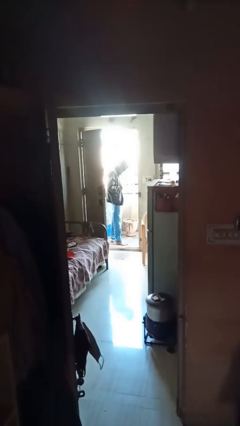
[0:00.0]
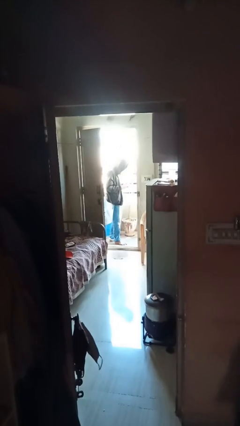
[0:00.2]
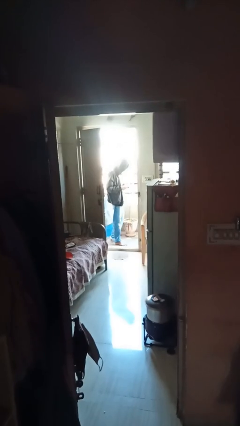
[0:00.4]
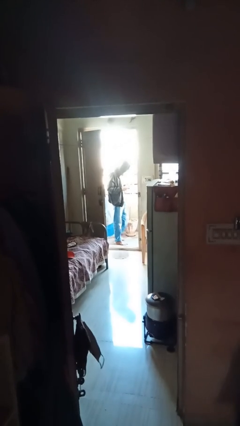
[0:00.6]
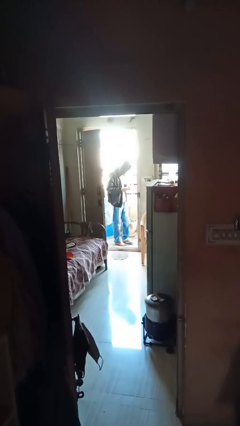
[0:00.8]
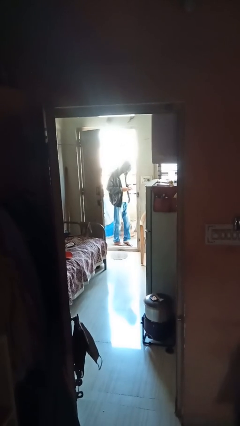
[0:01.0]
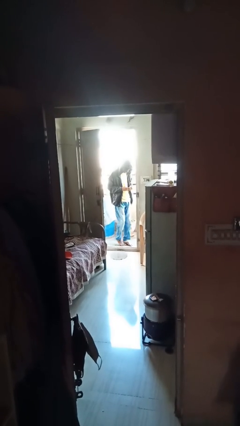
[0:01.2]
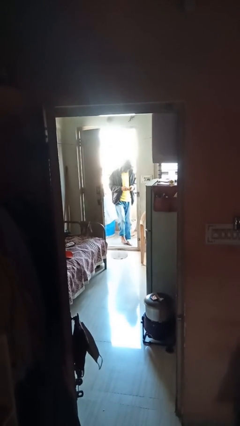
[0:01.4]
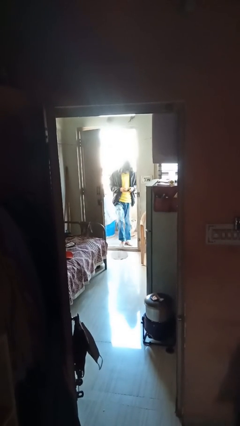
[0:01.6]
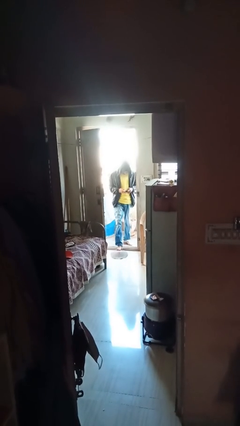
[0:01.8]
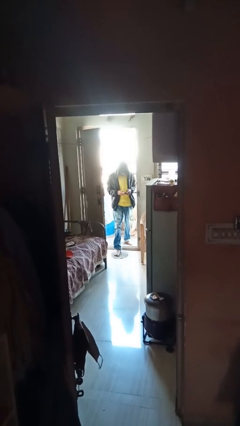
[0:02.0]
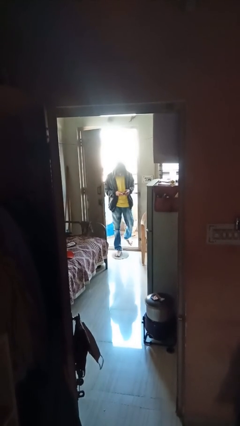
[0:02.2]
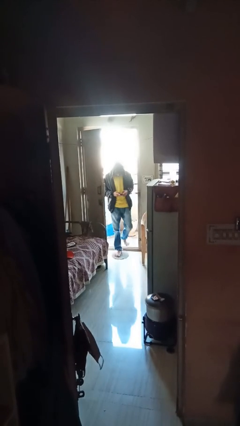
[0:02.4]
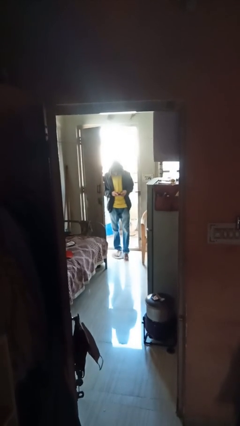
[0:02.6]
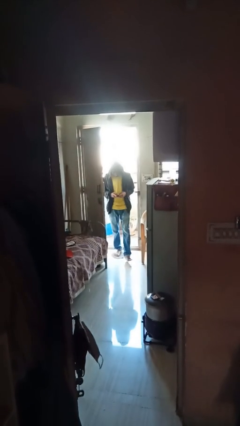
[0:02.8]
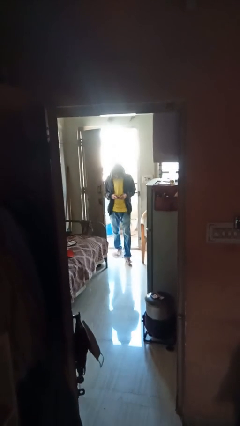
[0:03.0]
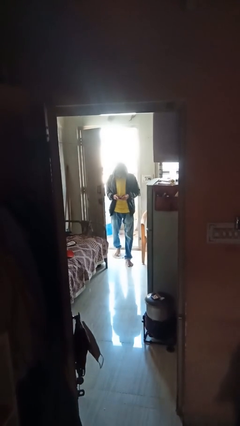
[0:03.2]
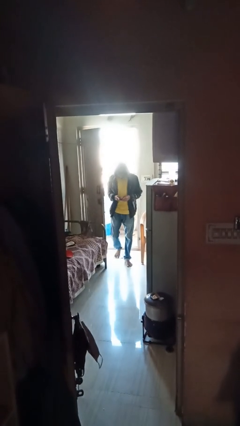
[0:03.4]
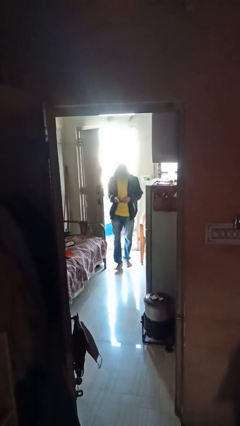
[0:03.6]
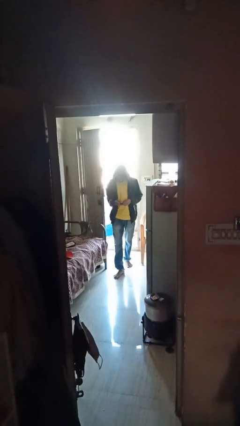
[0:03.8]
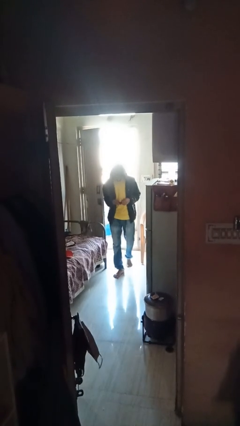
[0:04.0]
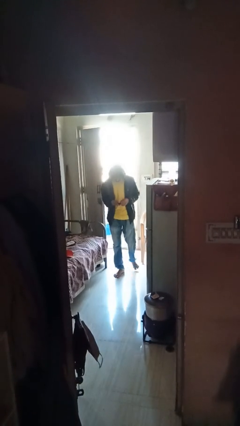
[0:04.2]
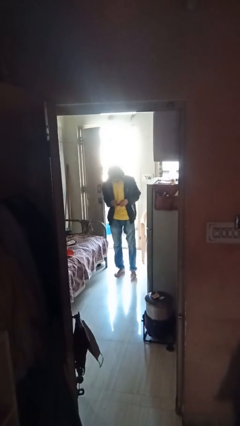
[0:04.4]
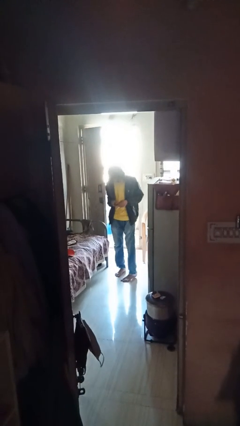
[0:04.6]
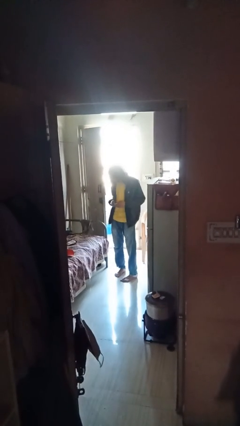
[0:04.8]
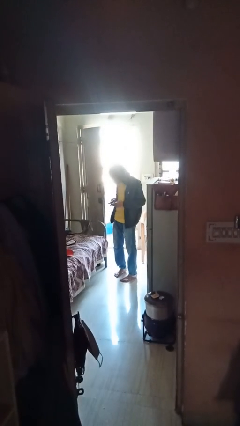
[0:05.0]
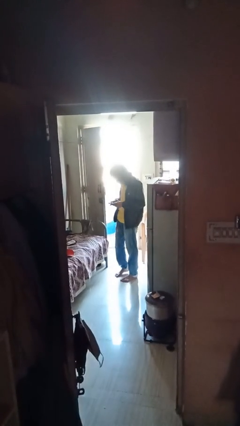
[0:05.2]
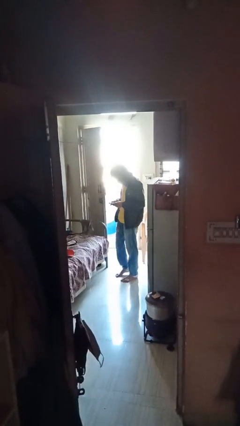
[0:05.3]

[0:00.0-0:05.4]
person enters scene through structure

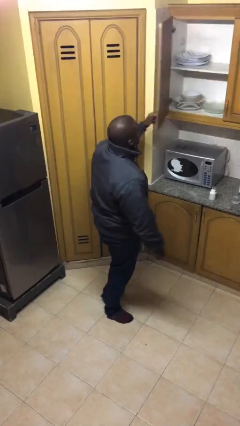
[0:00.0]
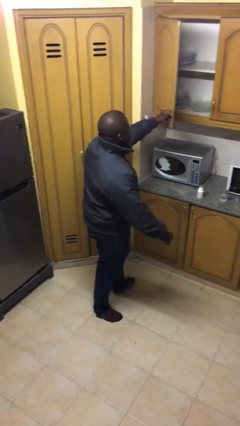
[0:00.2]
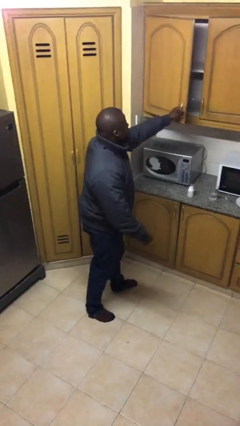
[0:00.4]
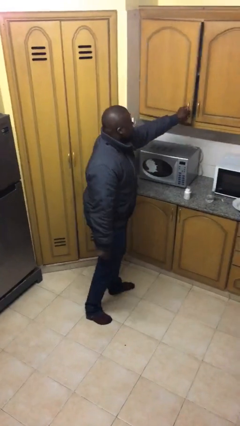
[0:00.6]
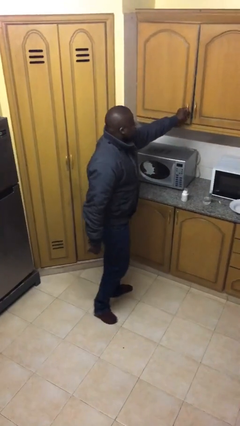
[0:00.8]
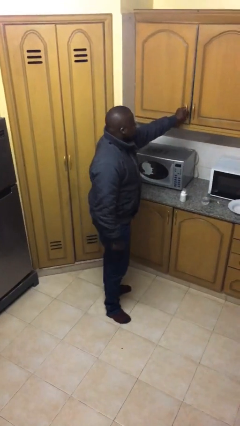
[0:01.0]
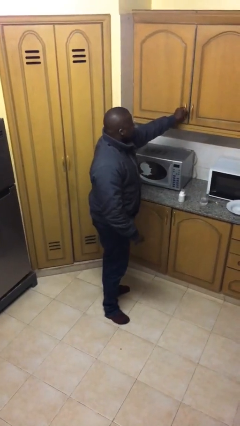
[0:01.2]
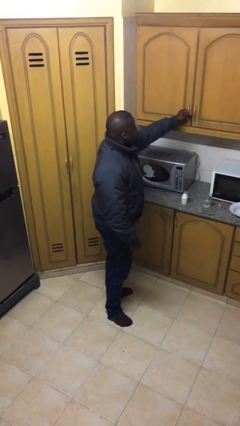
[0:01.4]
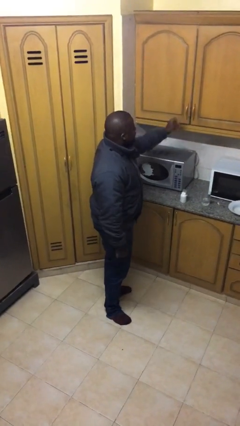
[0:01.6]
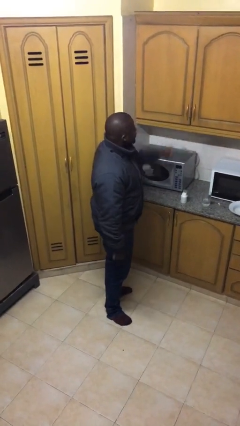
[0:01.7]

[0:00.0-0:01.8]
person closes cabinet

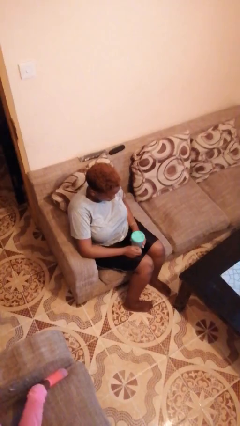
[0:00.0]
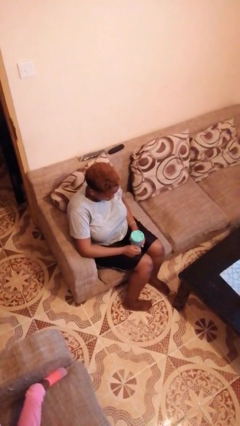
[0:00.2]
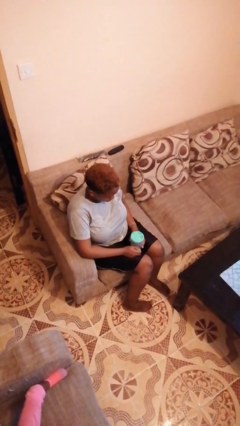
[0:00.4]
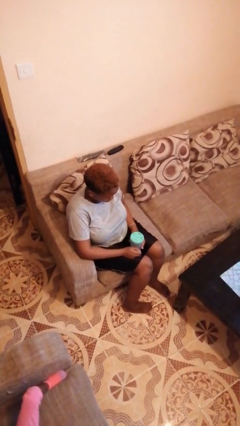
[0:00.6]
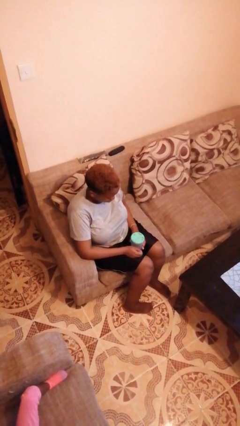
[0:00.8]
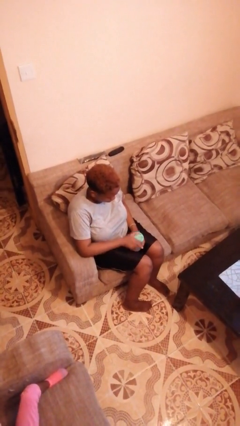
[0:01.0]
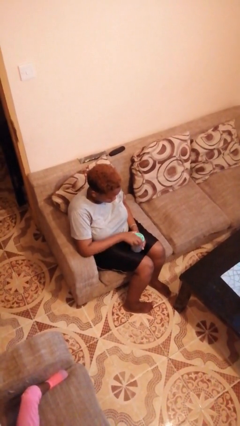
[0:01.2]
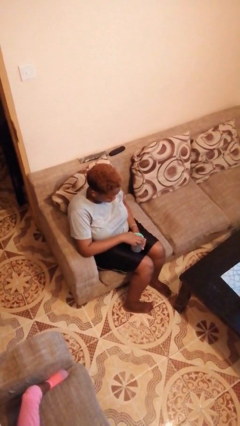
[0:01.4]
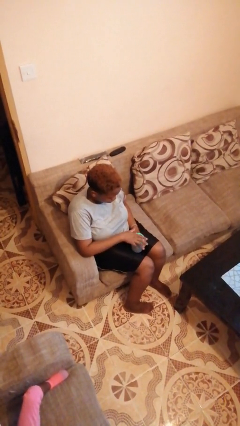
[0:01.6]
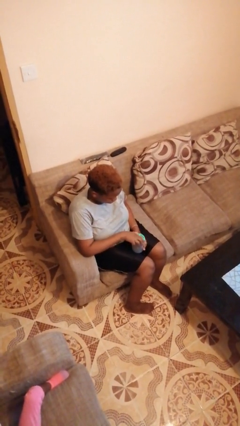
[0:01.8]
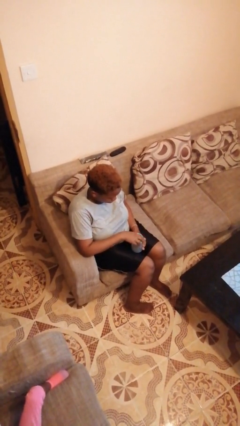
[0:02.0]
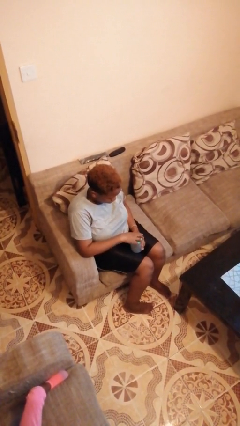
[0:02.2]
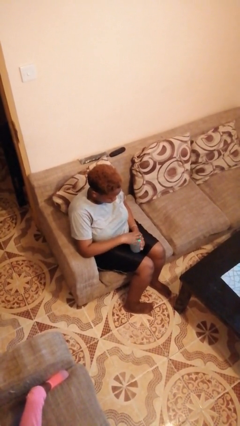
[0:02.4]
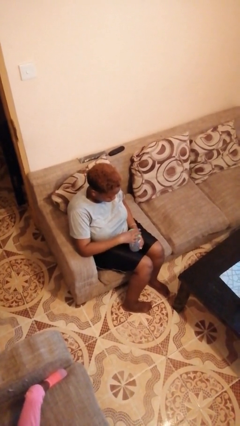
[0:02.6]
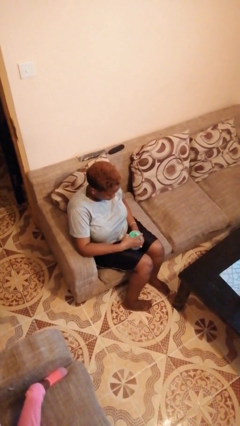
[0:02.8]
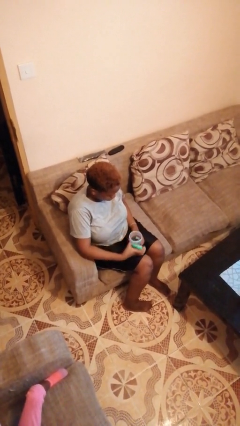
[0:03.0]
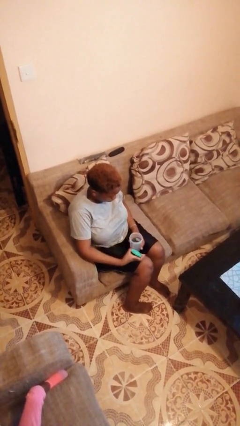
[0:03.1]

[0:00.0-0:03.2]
person opens jar

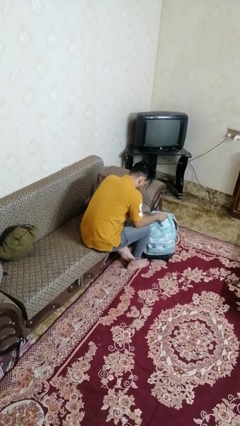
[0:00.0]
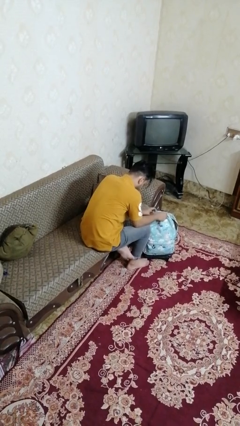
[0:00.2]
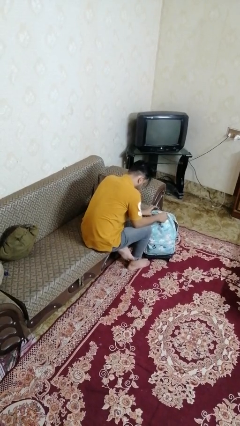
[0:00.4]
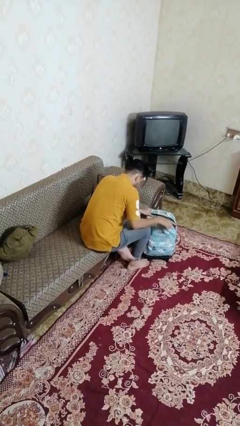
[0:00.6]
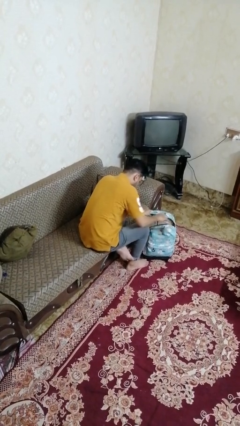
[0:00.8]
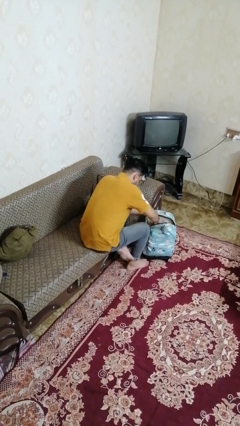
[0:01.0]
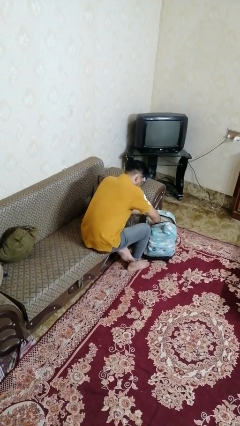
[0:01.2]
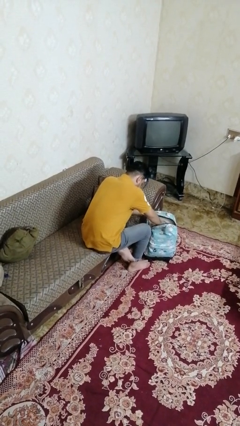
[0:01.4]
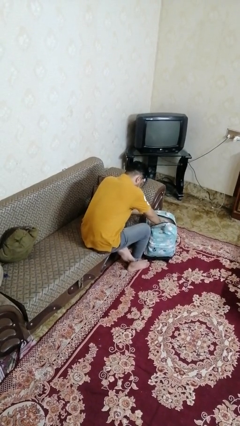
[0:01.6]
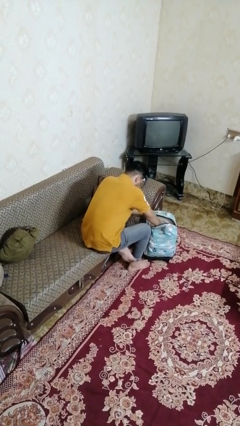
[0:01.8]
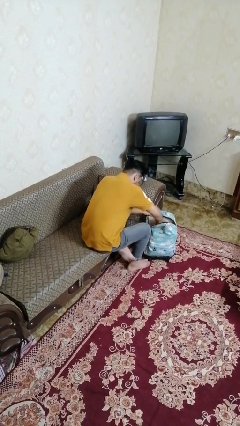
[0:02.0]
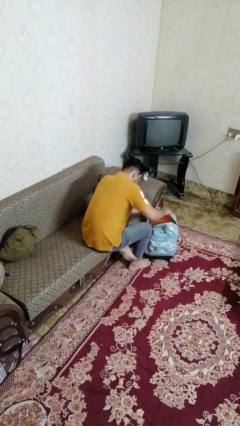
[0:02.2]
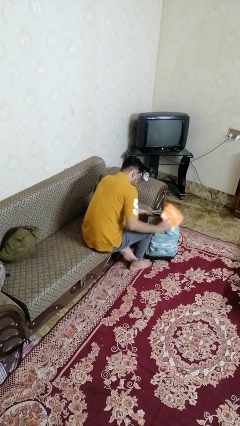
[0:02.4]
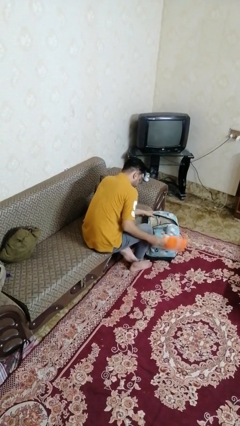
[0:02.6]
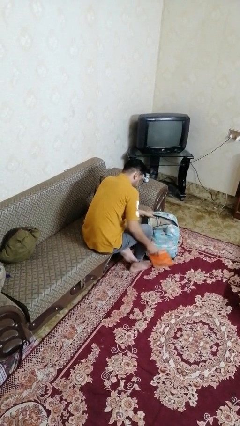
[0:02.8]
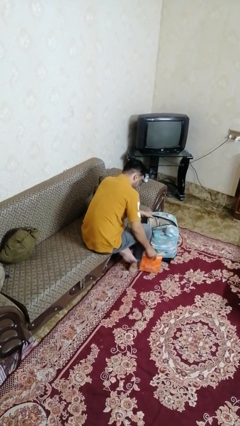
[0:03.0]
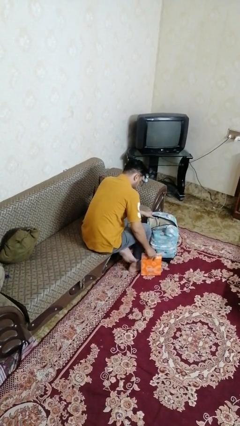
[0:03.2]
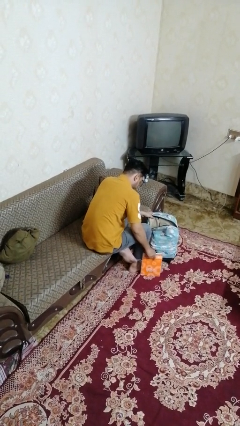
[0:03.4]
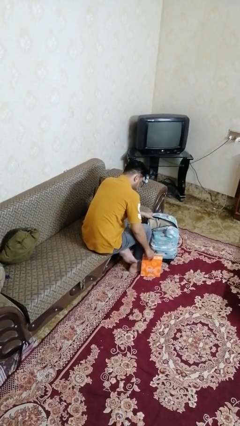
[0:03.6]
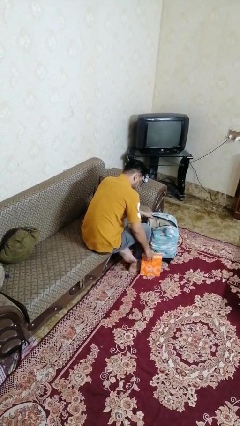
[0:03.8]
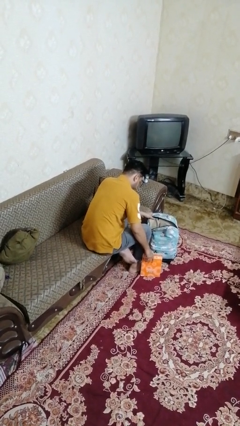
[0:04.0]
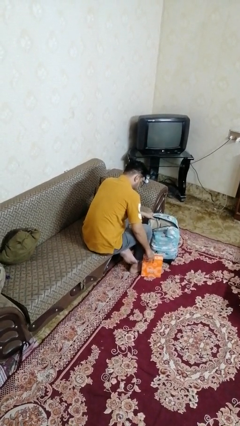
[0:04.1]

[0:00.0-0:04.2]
person takes object from bag

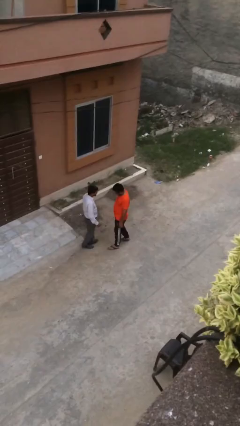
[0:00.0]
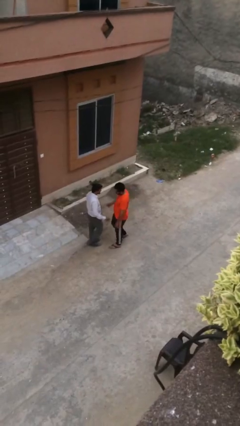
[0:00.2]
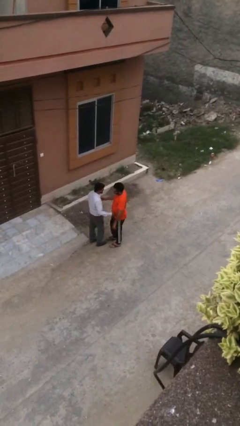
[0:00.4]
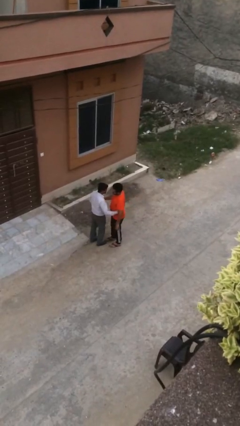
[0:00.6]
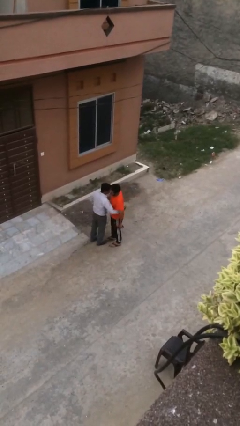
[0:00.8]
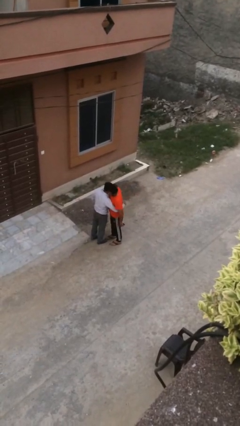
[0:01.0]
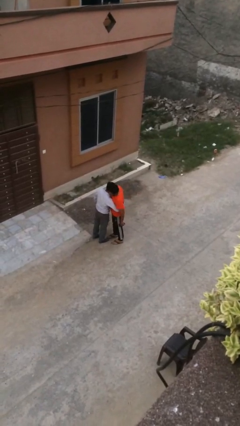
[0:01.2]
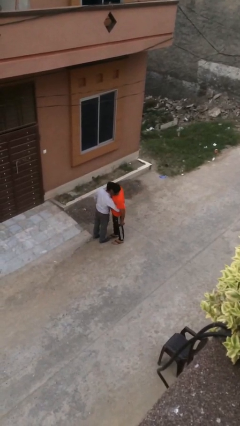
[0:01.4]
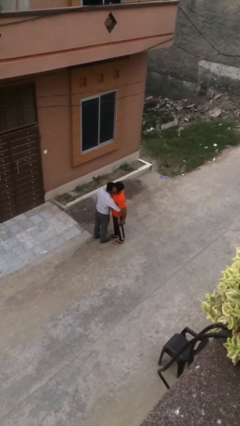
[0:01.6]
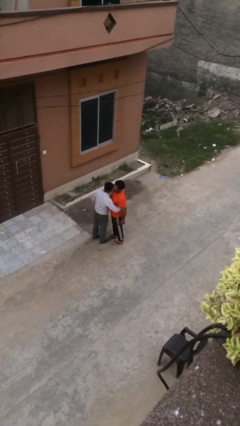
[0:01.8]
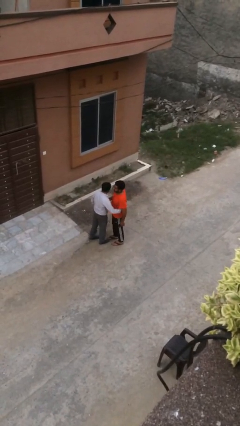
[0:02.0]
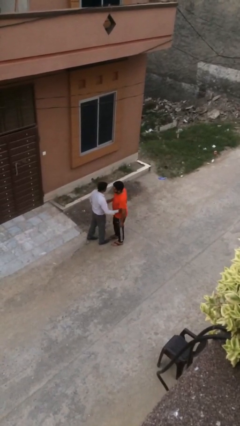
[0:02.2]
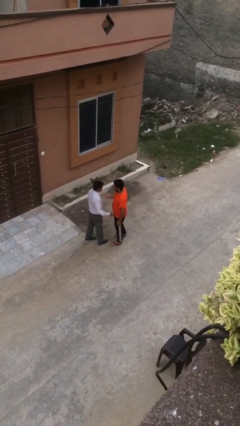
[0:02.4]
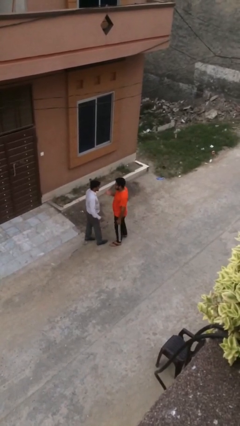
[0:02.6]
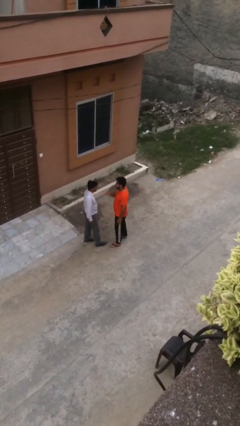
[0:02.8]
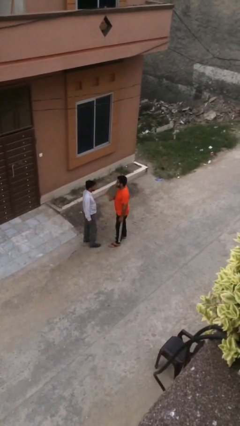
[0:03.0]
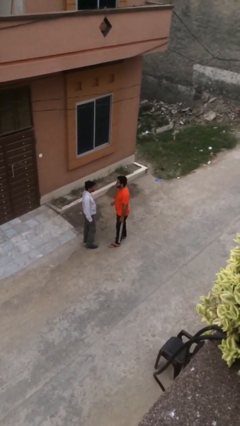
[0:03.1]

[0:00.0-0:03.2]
person embraces person
